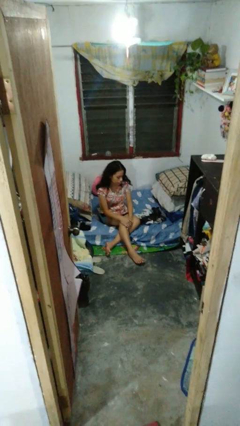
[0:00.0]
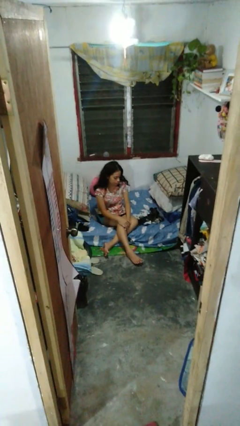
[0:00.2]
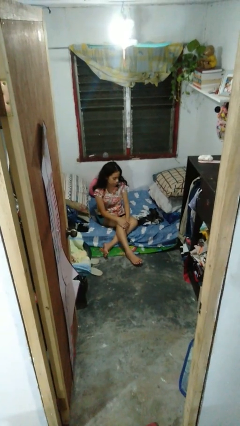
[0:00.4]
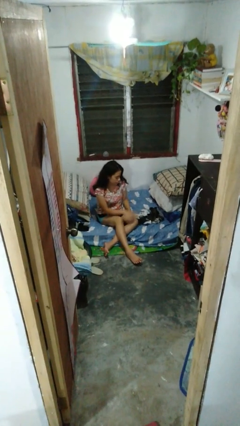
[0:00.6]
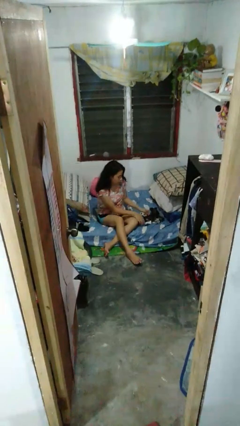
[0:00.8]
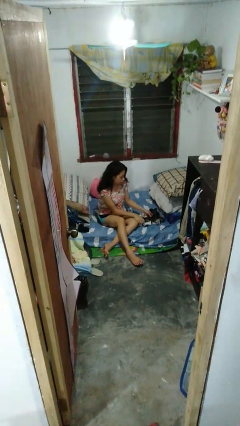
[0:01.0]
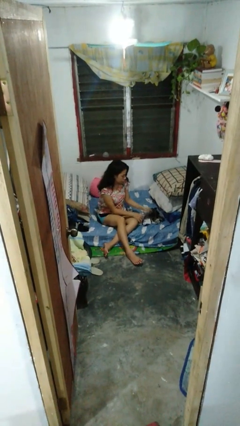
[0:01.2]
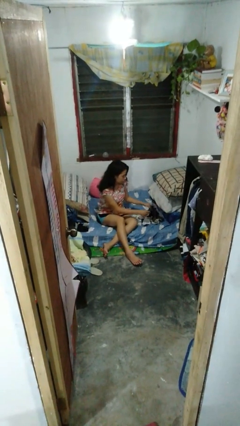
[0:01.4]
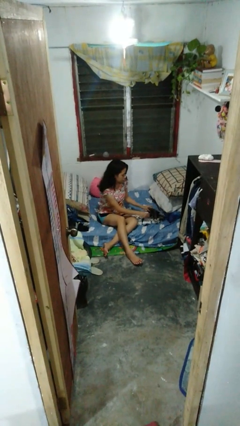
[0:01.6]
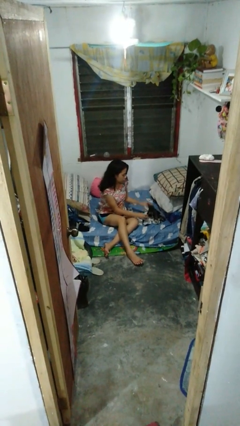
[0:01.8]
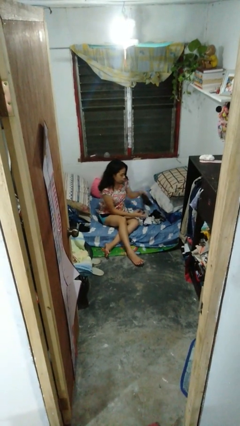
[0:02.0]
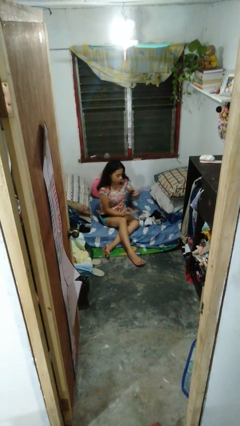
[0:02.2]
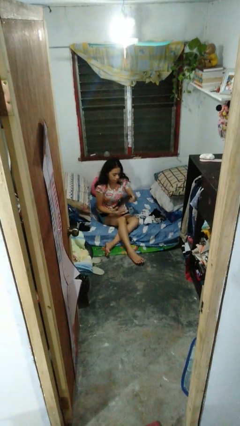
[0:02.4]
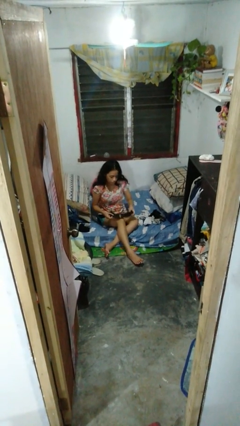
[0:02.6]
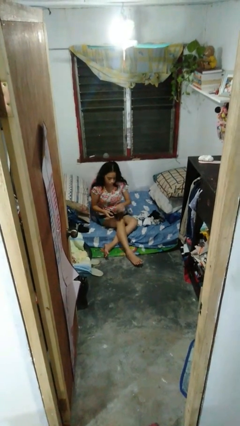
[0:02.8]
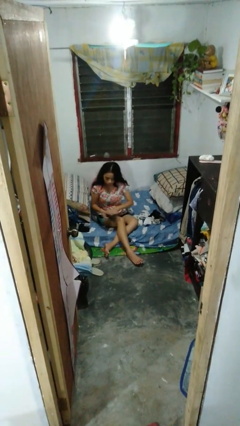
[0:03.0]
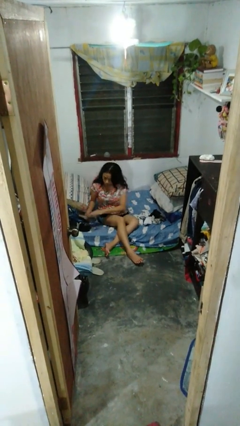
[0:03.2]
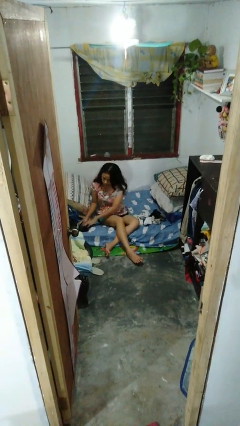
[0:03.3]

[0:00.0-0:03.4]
person folds socks

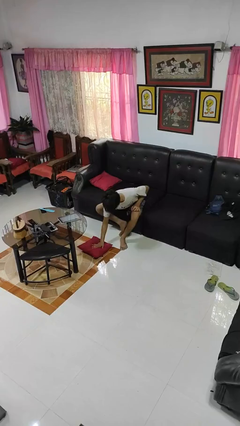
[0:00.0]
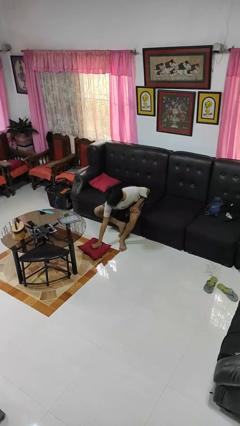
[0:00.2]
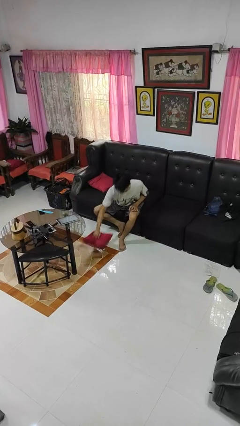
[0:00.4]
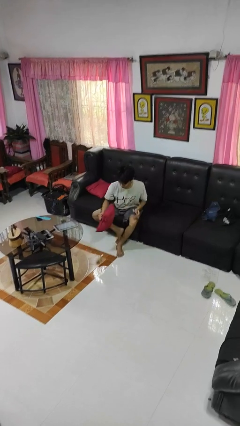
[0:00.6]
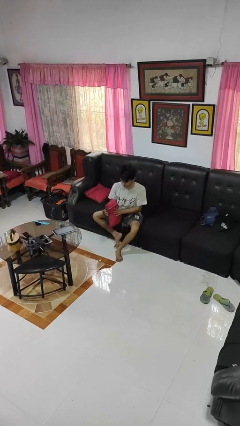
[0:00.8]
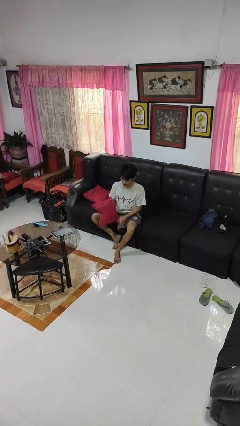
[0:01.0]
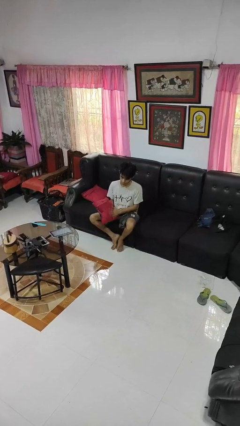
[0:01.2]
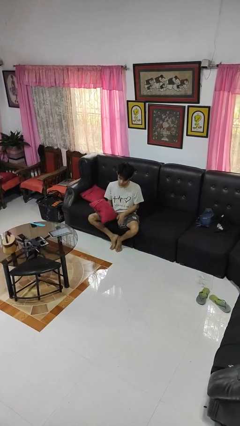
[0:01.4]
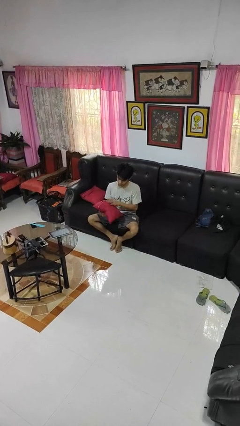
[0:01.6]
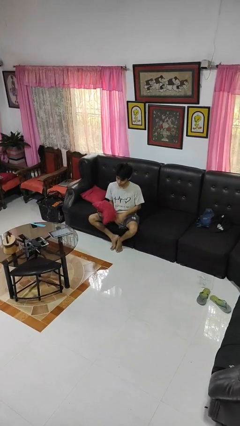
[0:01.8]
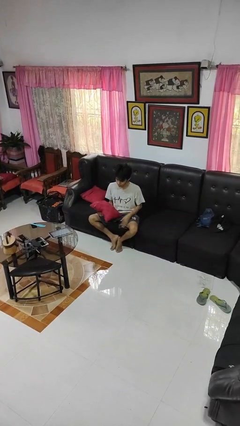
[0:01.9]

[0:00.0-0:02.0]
person picks up object from floor

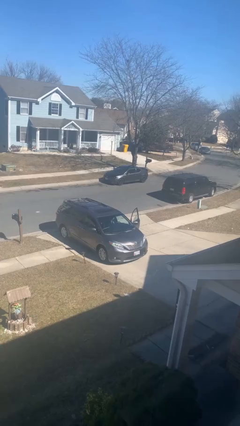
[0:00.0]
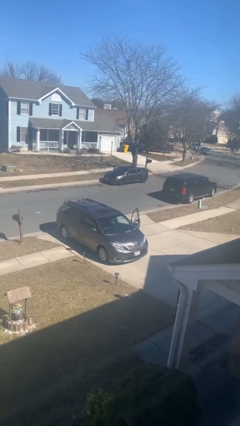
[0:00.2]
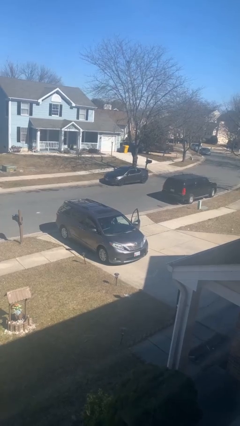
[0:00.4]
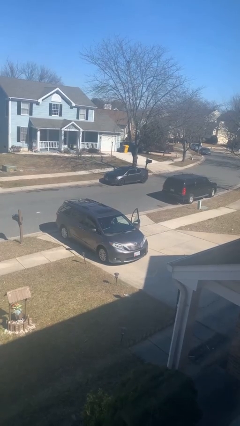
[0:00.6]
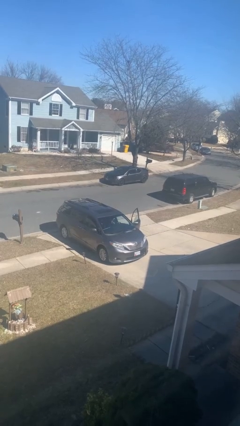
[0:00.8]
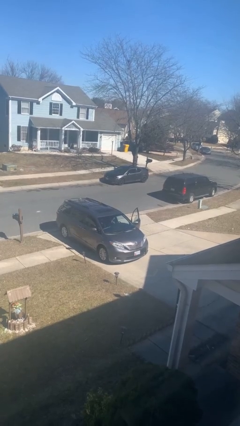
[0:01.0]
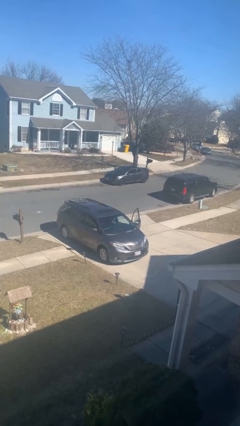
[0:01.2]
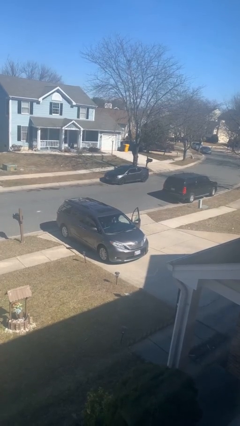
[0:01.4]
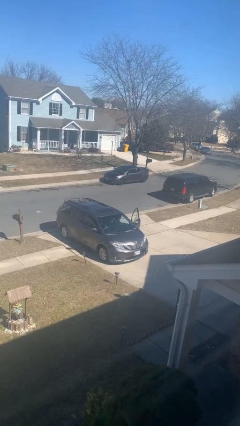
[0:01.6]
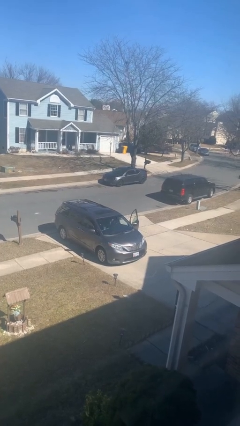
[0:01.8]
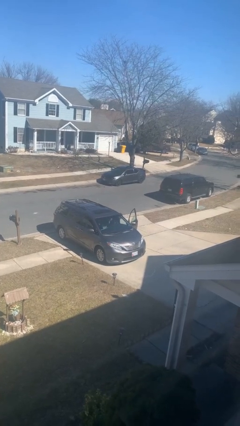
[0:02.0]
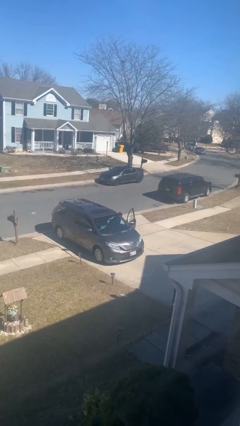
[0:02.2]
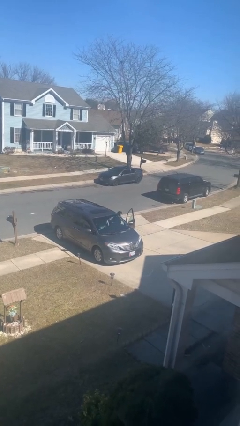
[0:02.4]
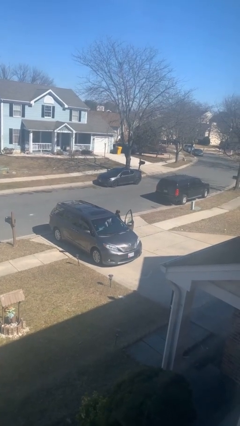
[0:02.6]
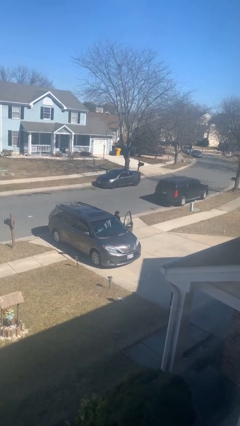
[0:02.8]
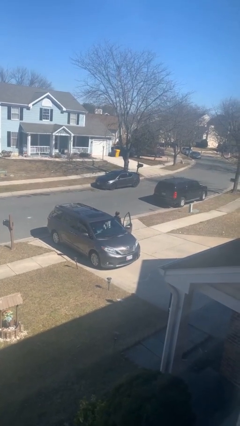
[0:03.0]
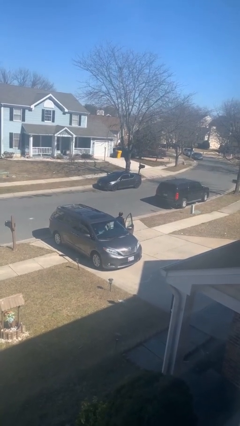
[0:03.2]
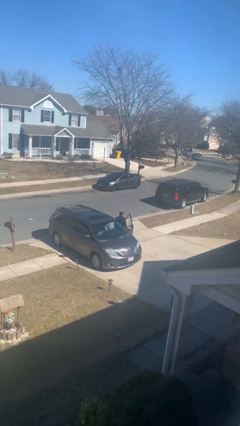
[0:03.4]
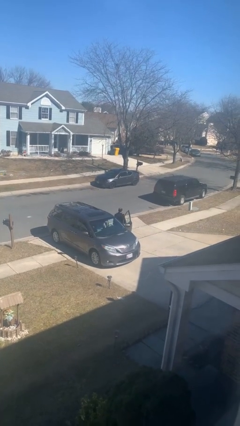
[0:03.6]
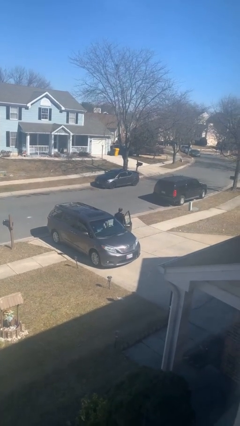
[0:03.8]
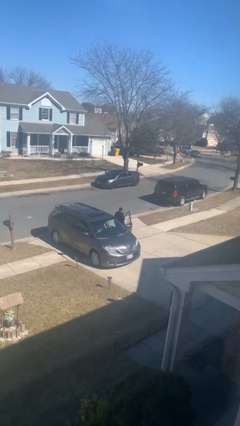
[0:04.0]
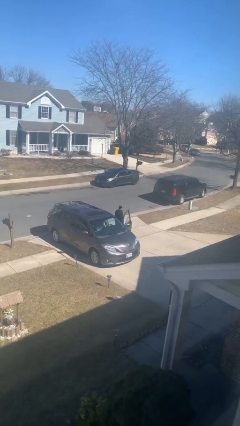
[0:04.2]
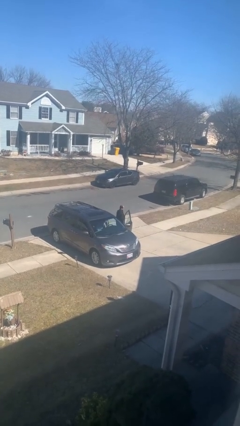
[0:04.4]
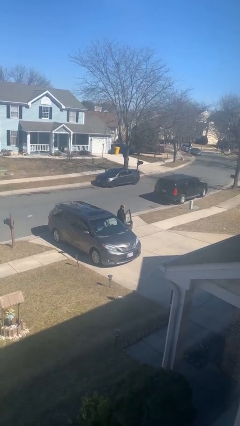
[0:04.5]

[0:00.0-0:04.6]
person exits car

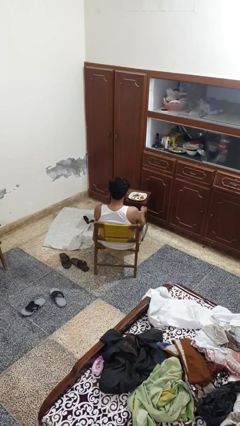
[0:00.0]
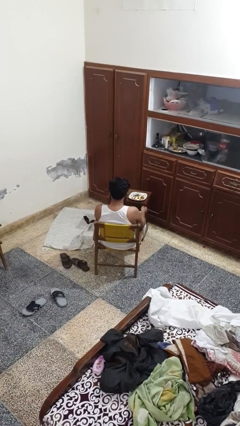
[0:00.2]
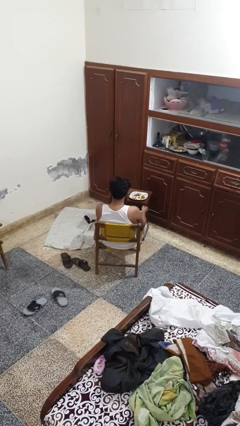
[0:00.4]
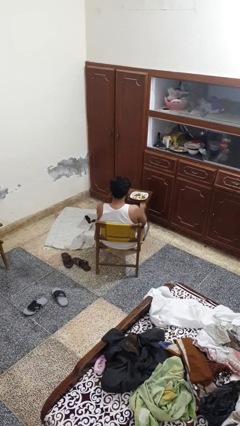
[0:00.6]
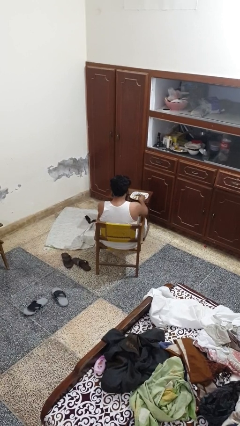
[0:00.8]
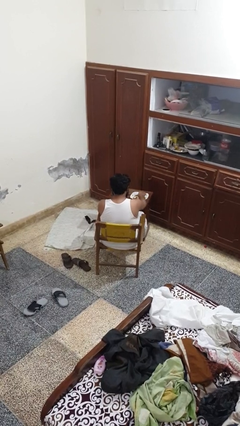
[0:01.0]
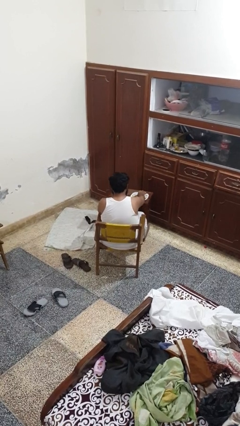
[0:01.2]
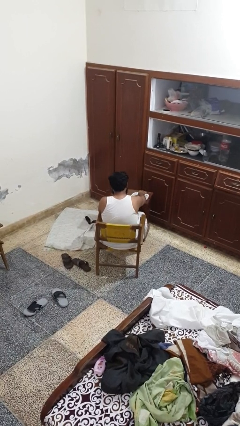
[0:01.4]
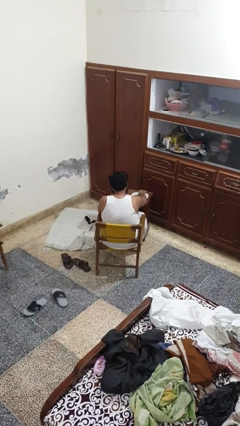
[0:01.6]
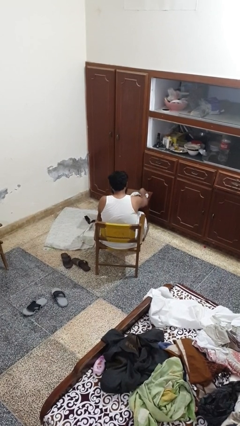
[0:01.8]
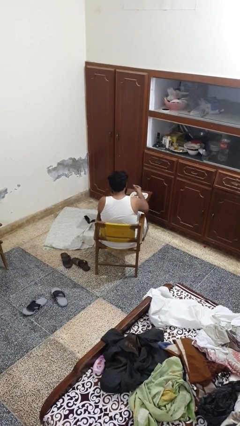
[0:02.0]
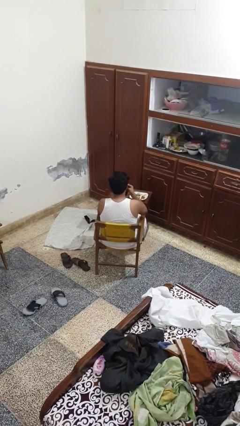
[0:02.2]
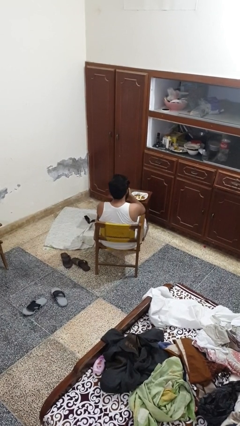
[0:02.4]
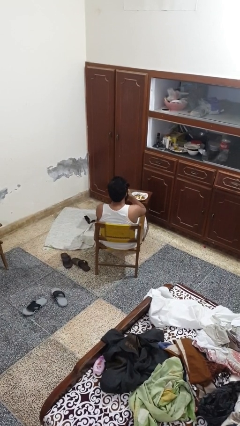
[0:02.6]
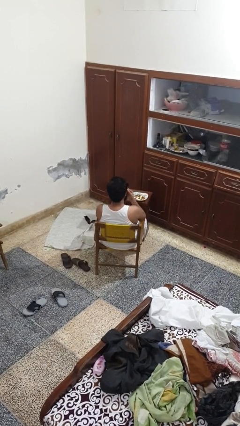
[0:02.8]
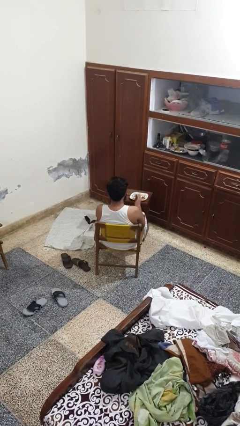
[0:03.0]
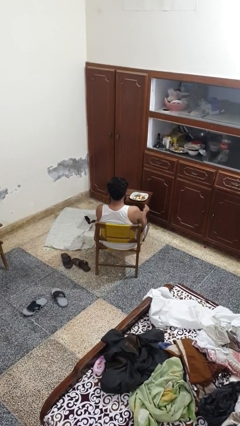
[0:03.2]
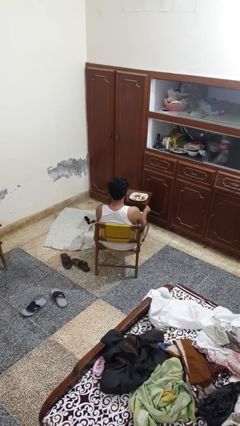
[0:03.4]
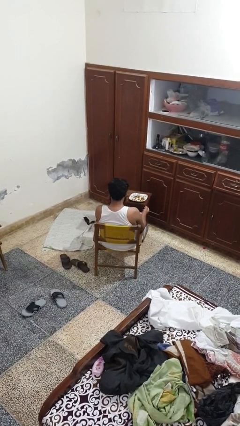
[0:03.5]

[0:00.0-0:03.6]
person eats with hands

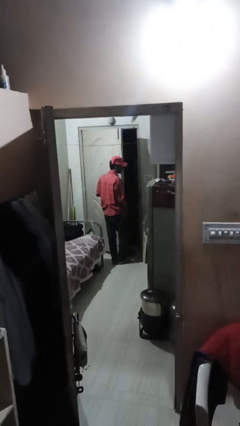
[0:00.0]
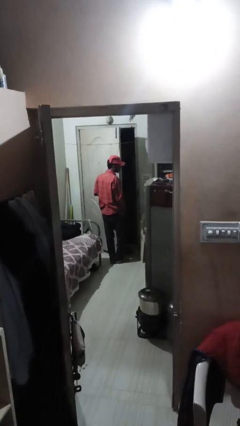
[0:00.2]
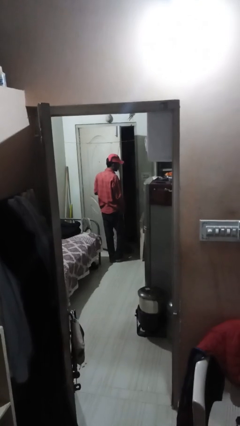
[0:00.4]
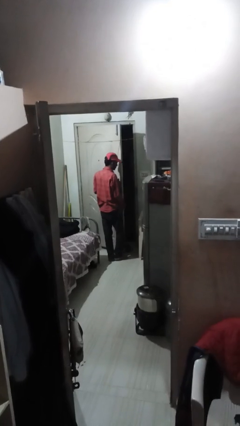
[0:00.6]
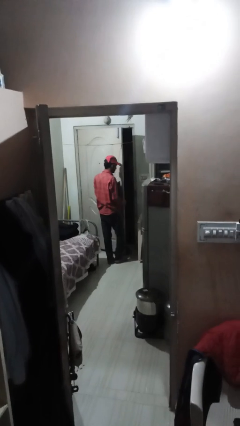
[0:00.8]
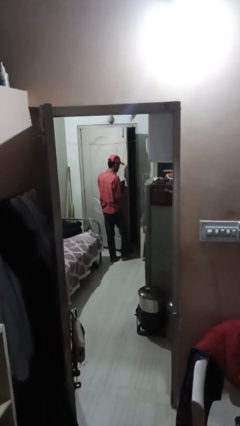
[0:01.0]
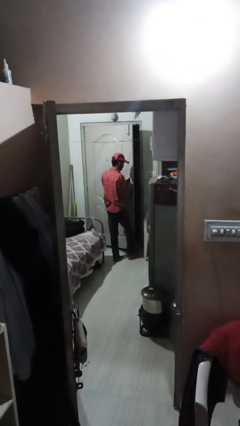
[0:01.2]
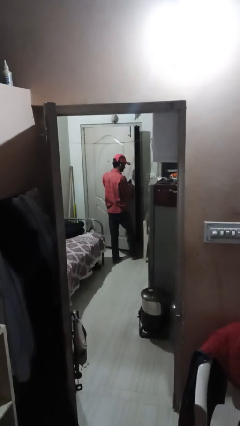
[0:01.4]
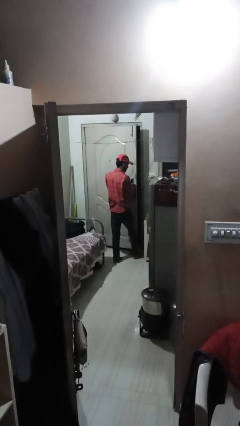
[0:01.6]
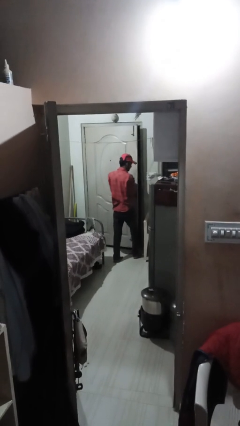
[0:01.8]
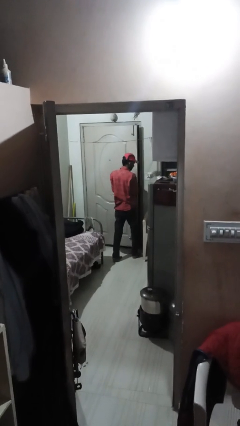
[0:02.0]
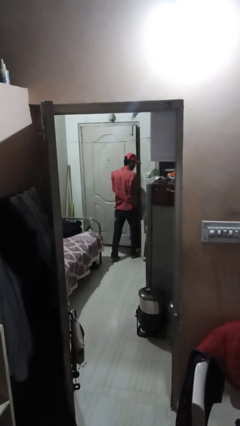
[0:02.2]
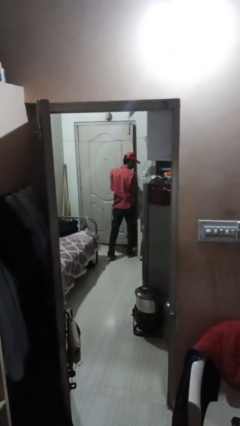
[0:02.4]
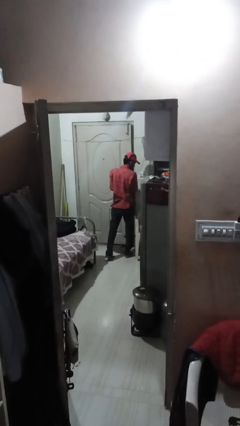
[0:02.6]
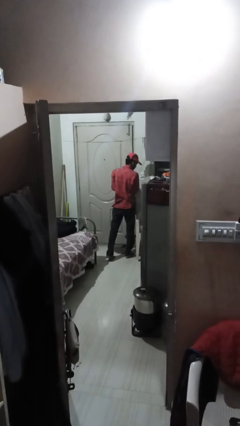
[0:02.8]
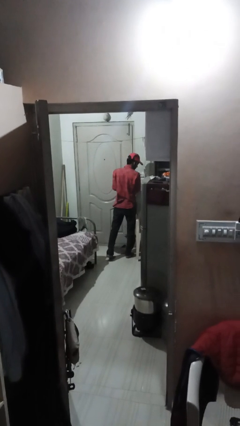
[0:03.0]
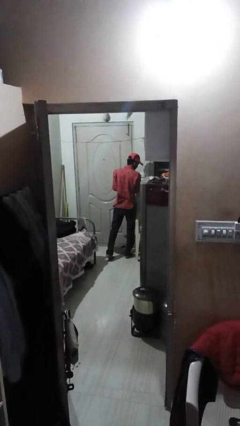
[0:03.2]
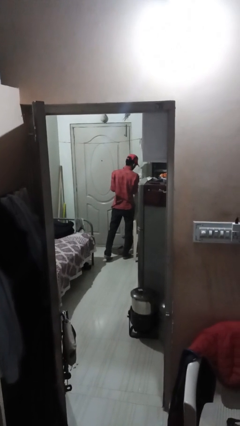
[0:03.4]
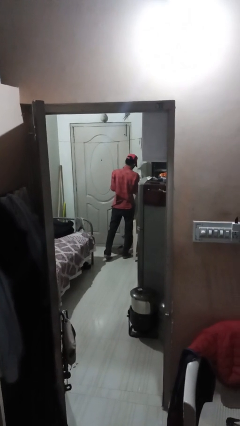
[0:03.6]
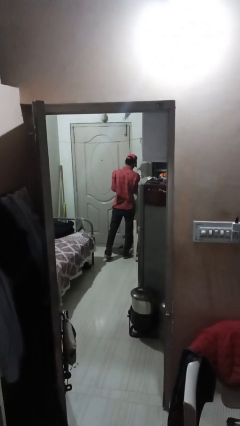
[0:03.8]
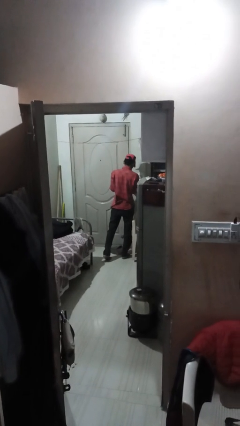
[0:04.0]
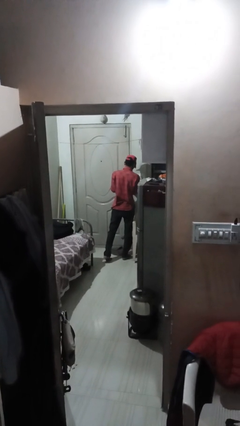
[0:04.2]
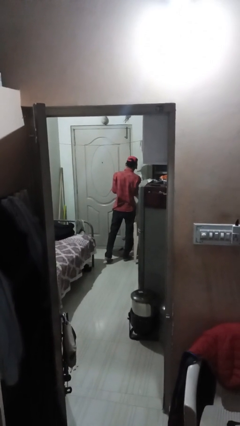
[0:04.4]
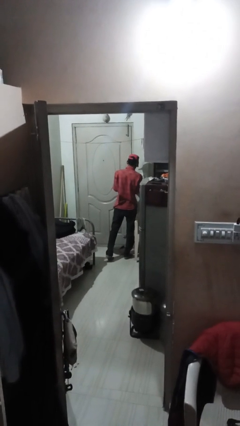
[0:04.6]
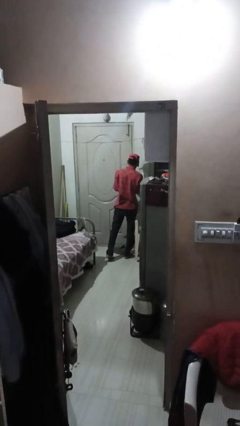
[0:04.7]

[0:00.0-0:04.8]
person closes facility door
